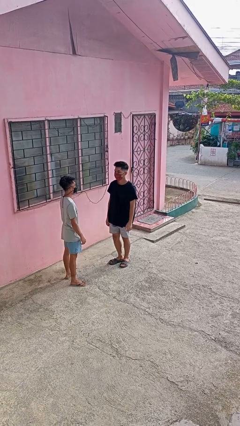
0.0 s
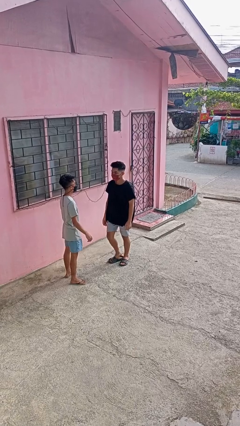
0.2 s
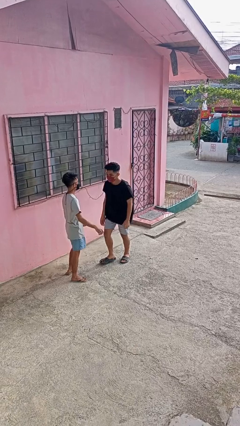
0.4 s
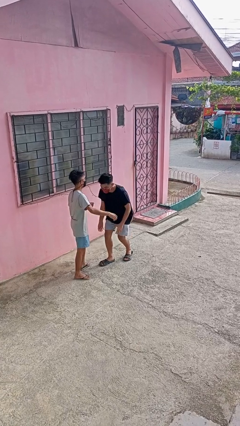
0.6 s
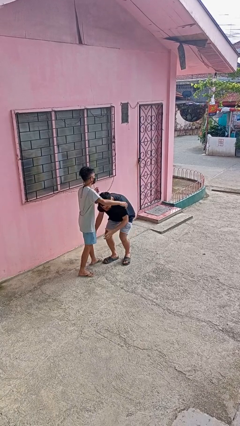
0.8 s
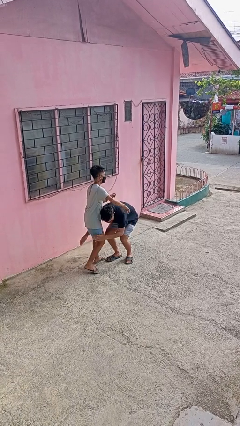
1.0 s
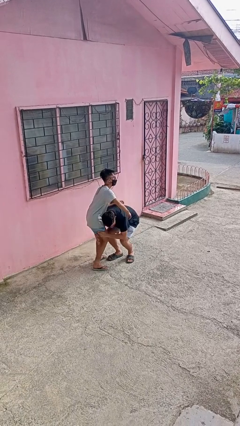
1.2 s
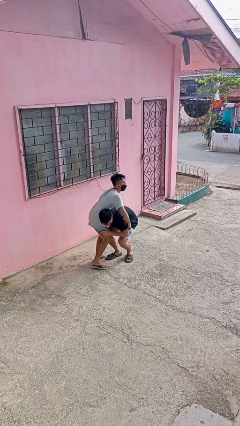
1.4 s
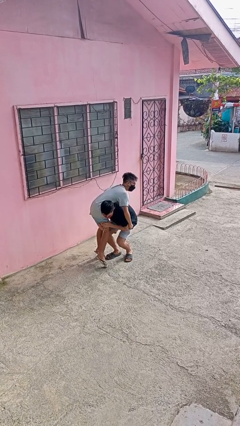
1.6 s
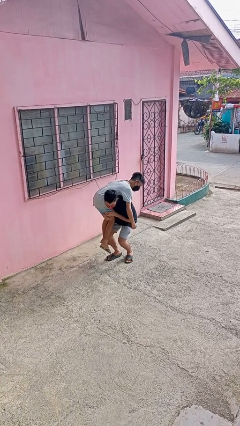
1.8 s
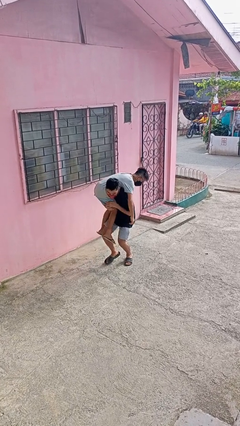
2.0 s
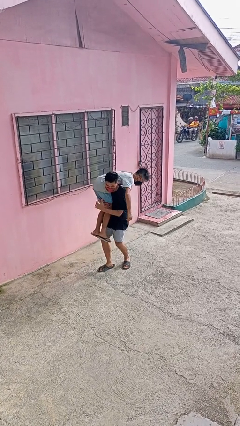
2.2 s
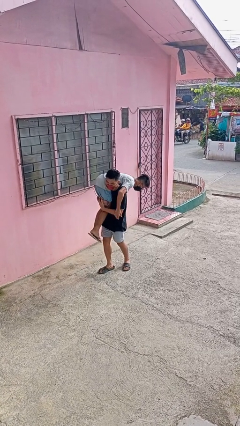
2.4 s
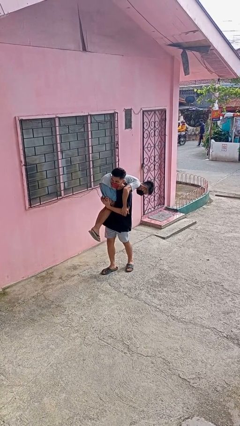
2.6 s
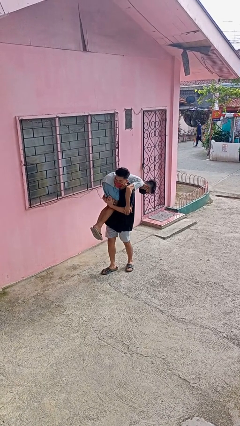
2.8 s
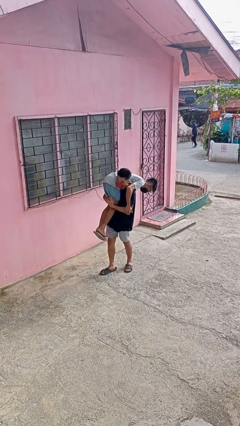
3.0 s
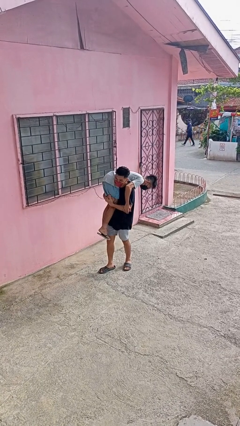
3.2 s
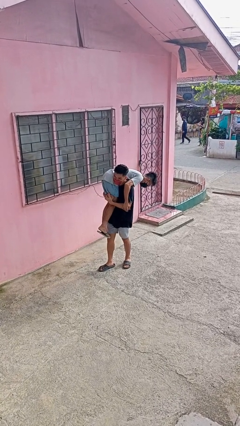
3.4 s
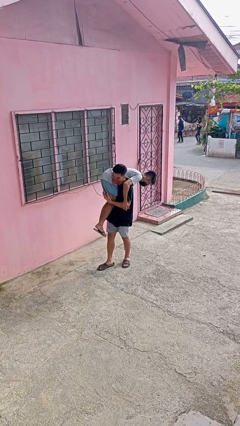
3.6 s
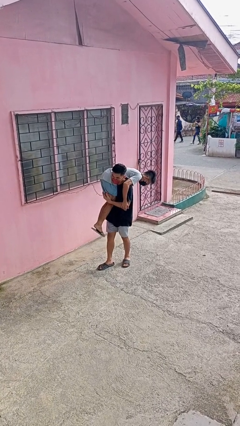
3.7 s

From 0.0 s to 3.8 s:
person carries person over shoulder

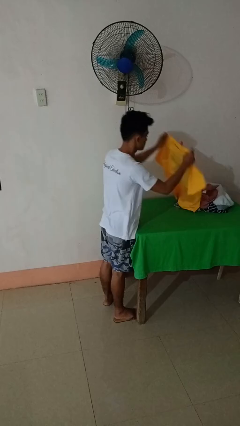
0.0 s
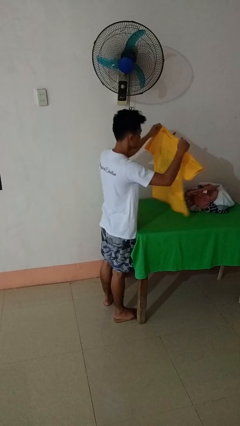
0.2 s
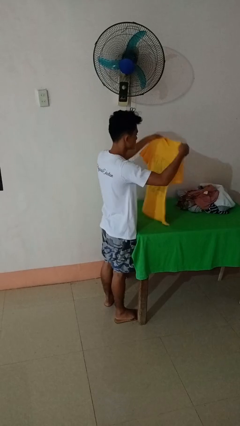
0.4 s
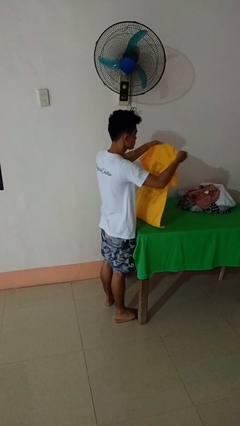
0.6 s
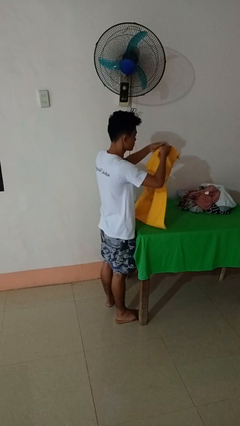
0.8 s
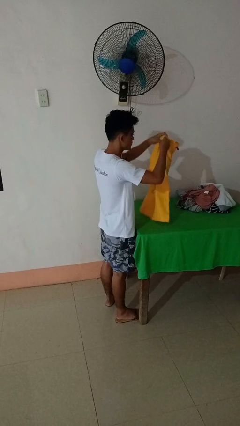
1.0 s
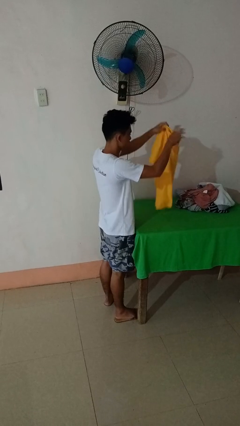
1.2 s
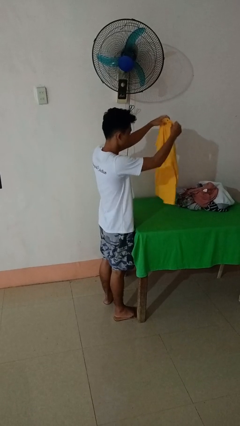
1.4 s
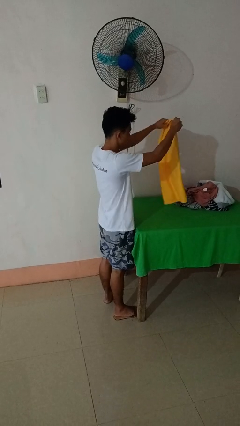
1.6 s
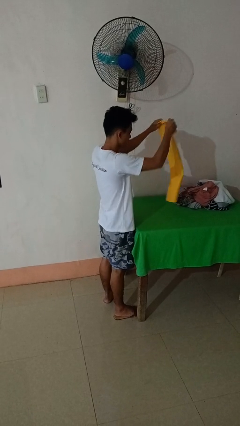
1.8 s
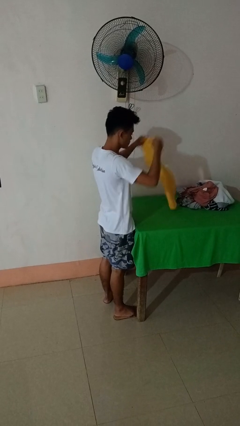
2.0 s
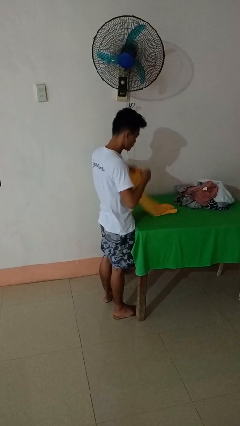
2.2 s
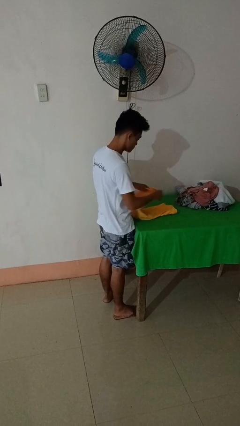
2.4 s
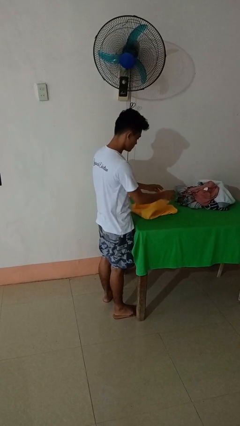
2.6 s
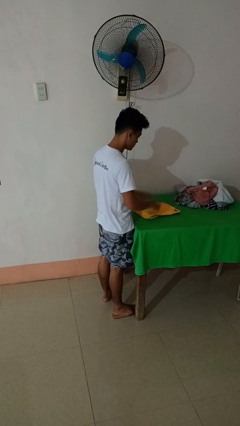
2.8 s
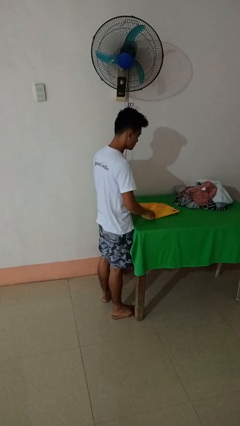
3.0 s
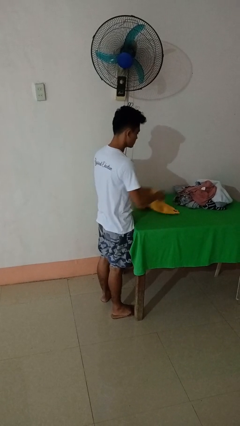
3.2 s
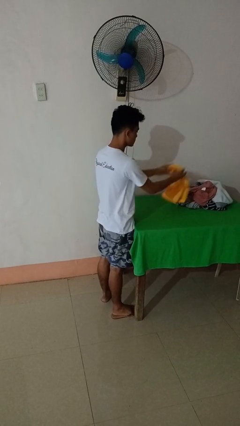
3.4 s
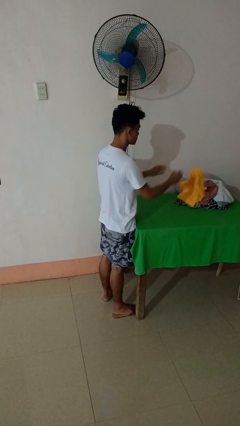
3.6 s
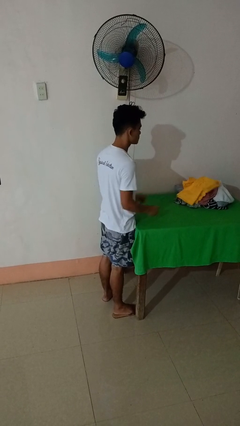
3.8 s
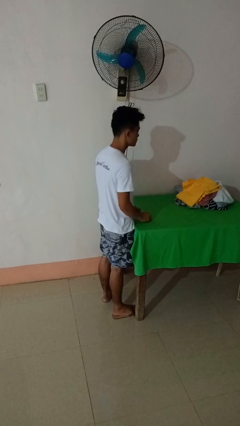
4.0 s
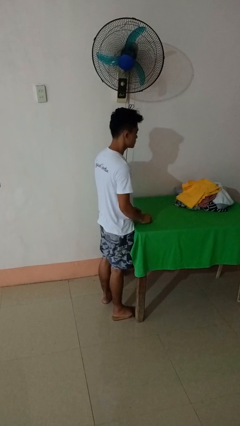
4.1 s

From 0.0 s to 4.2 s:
person folds shirt

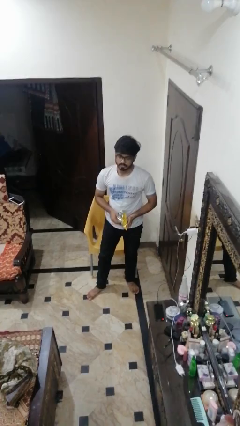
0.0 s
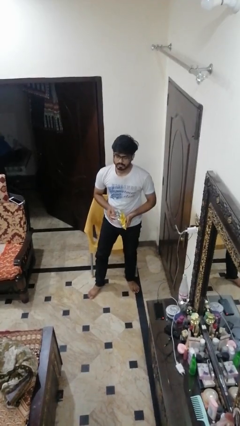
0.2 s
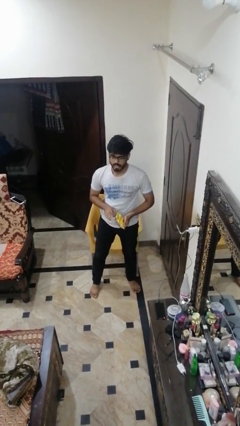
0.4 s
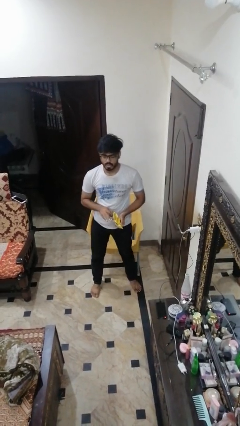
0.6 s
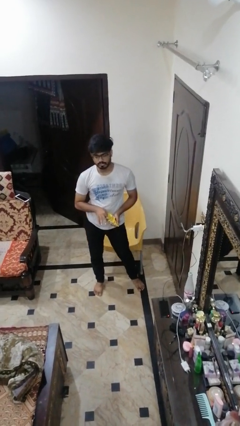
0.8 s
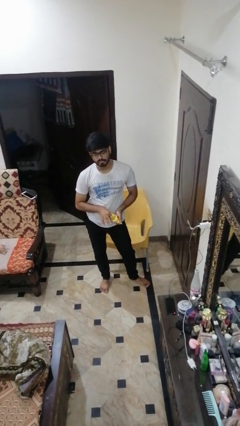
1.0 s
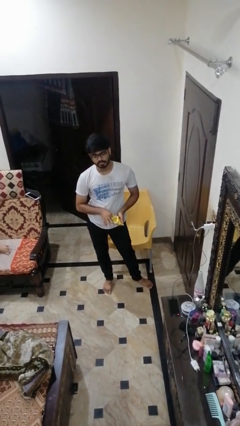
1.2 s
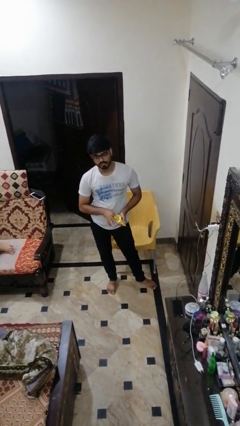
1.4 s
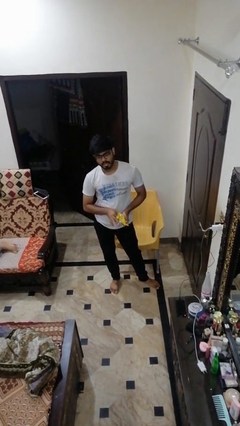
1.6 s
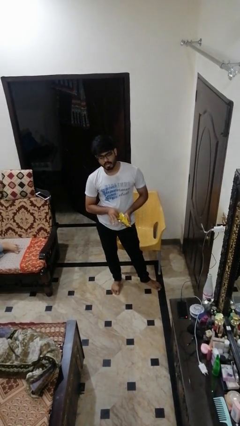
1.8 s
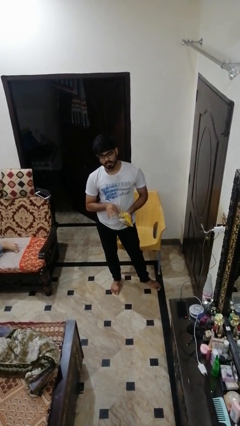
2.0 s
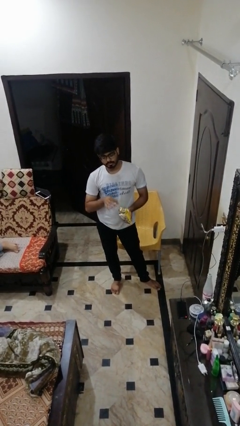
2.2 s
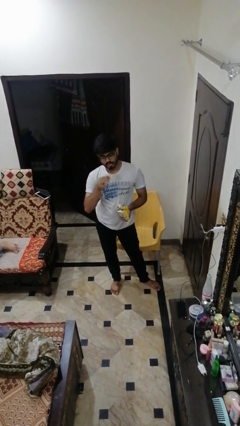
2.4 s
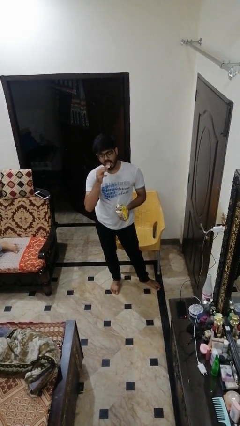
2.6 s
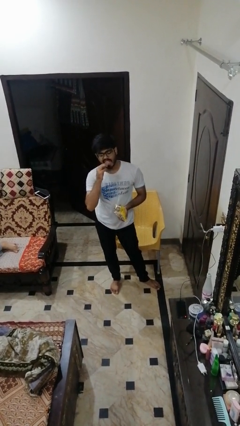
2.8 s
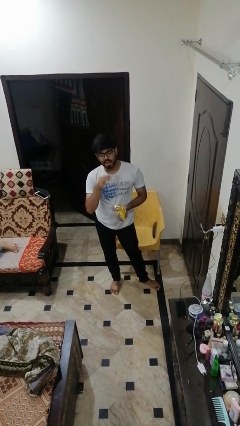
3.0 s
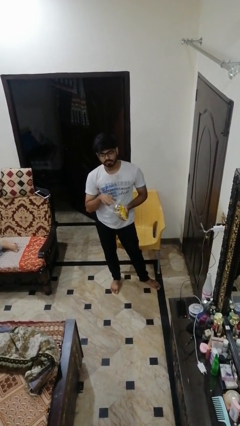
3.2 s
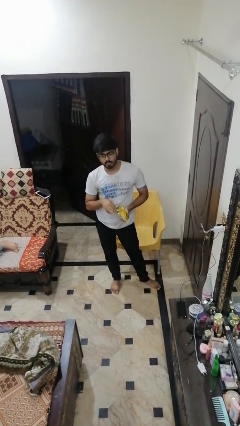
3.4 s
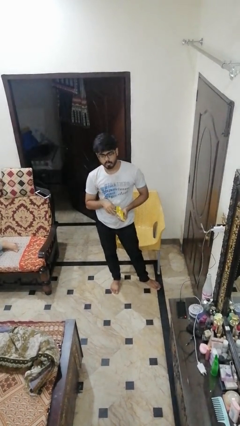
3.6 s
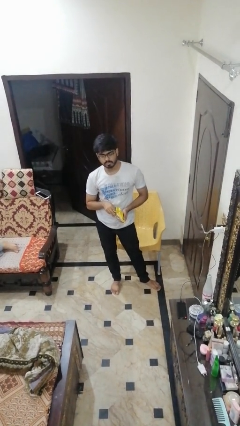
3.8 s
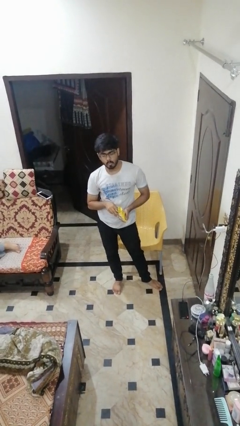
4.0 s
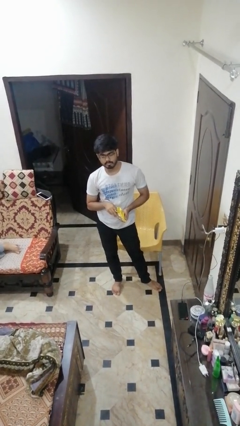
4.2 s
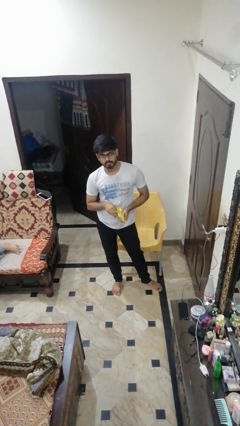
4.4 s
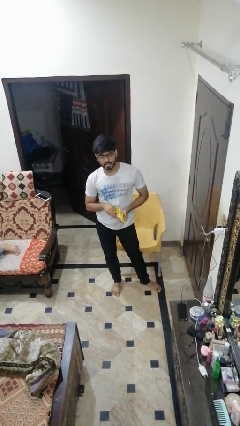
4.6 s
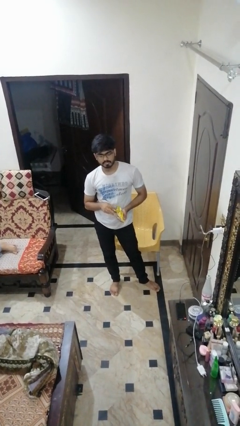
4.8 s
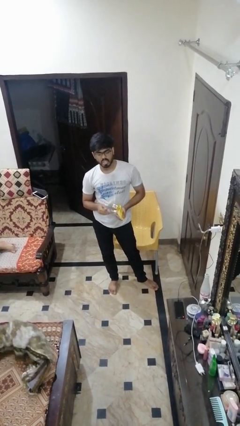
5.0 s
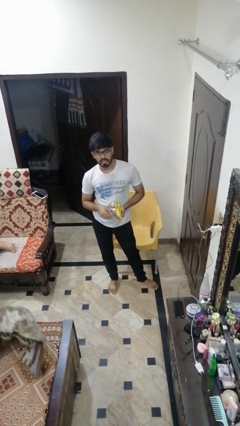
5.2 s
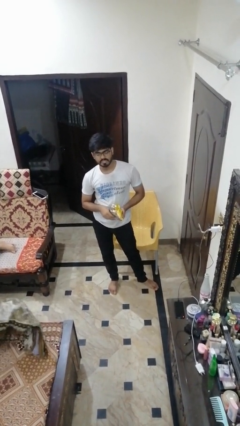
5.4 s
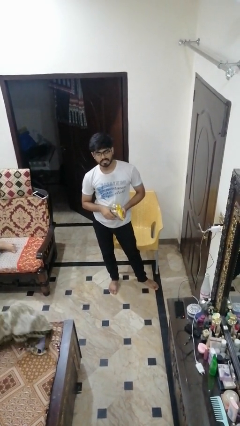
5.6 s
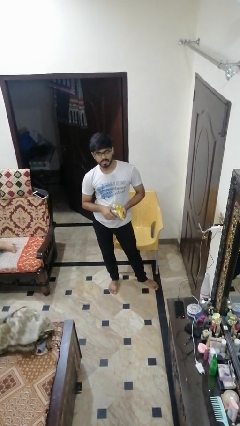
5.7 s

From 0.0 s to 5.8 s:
person eats snack from bag

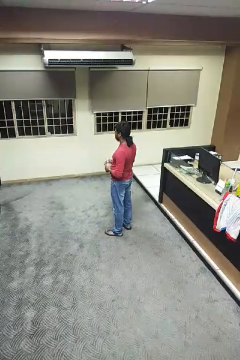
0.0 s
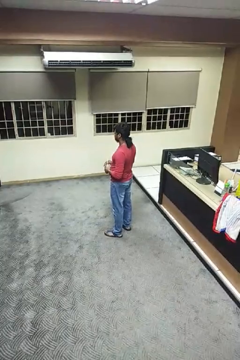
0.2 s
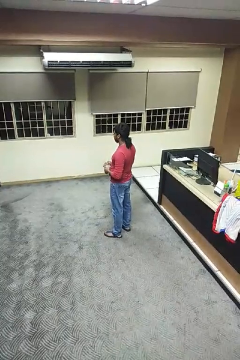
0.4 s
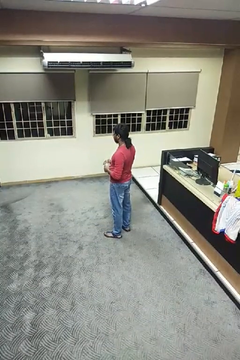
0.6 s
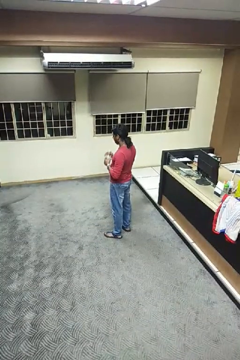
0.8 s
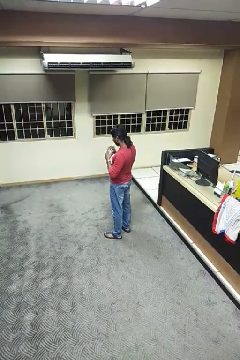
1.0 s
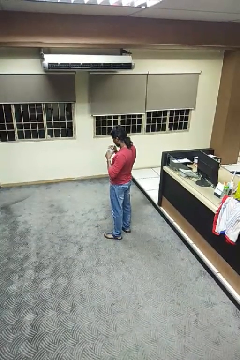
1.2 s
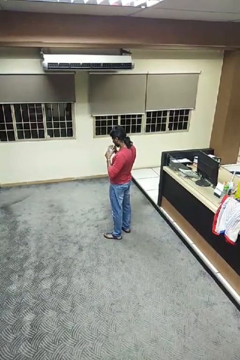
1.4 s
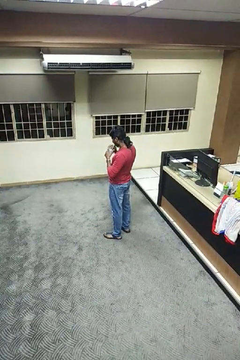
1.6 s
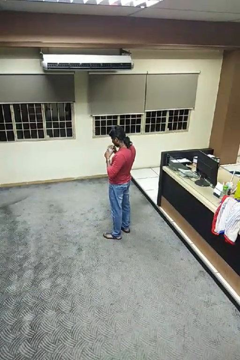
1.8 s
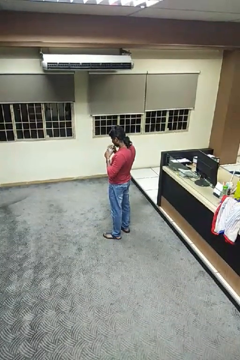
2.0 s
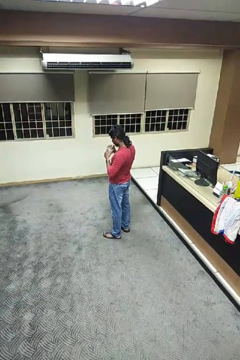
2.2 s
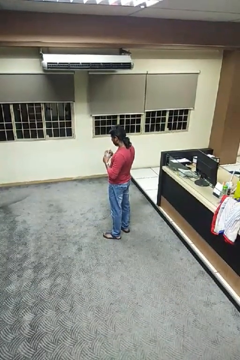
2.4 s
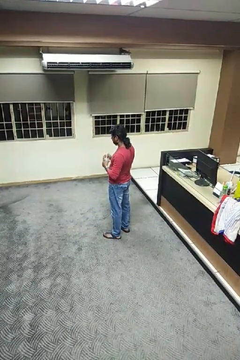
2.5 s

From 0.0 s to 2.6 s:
person drinks from straw

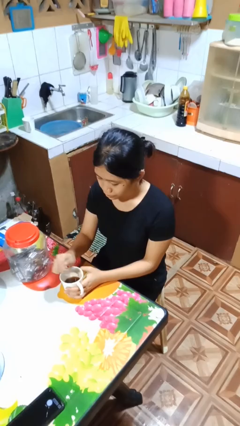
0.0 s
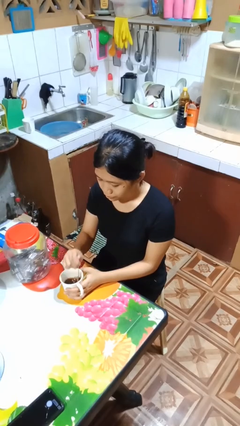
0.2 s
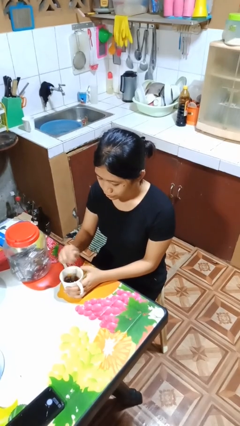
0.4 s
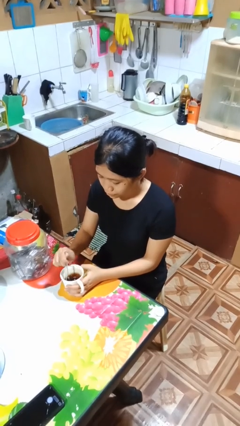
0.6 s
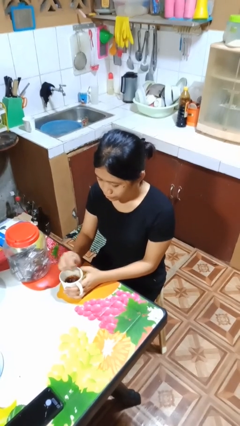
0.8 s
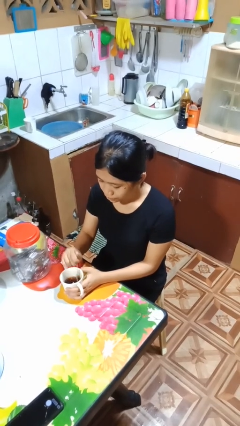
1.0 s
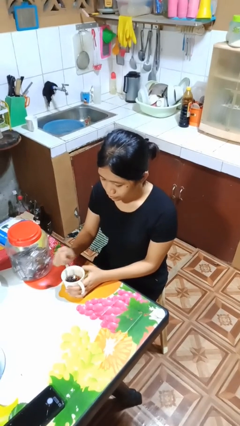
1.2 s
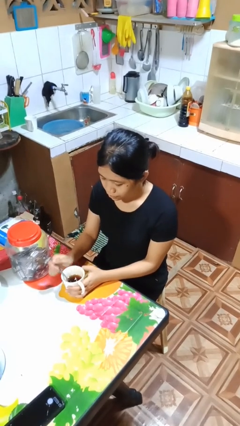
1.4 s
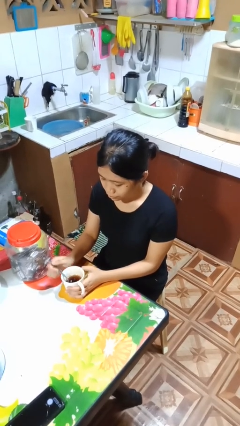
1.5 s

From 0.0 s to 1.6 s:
person stirs mug
